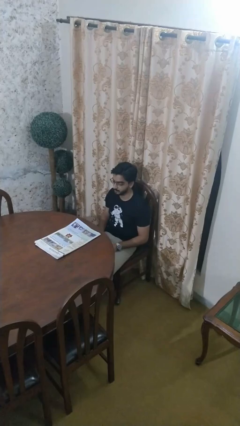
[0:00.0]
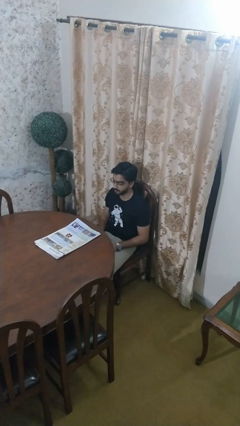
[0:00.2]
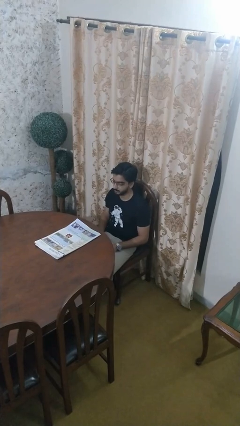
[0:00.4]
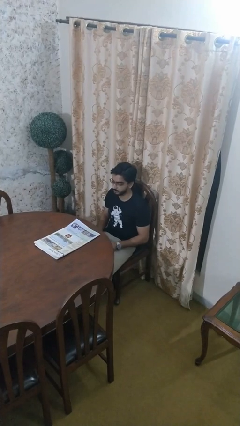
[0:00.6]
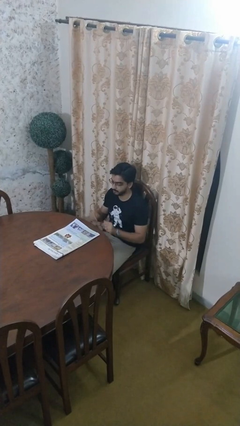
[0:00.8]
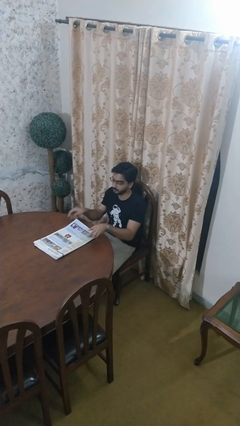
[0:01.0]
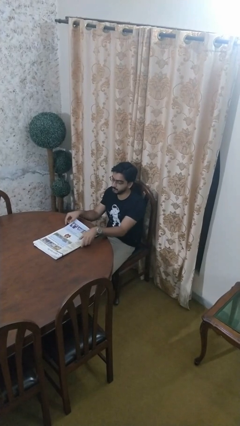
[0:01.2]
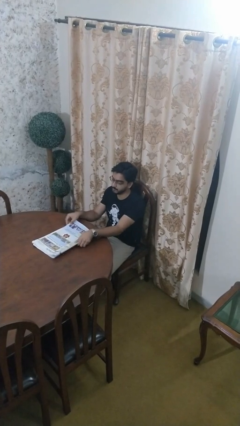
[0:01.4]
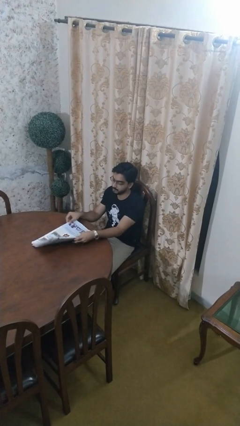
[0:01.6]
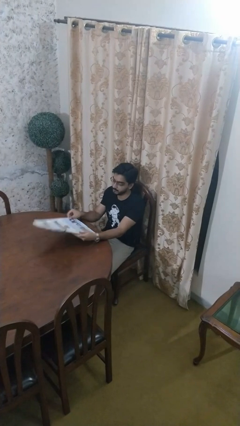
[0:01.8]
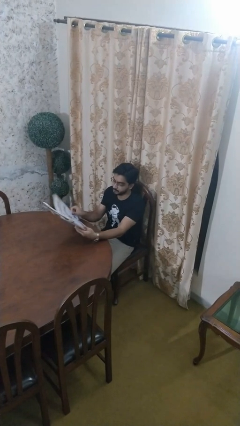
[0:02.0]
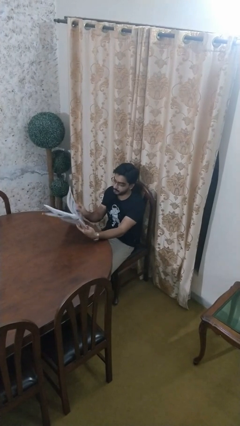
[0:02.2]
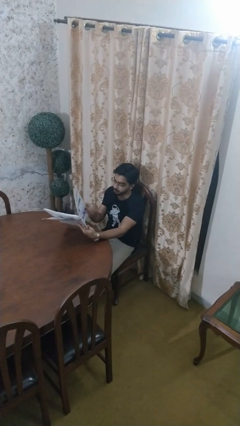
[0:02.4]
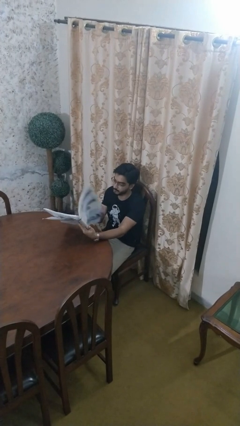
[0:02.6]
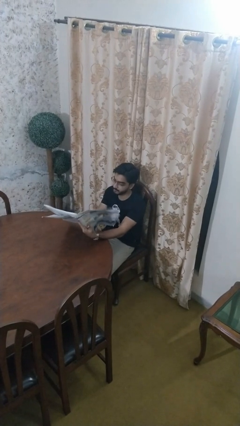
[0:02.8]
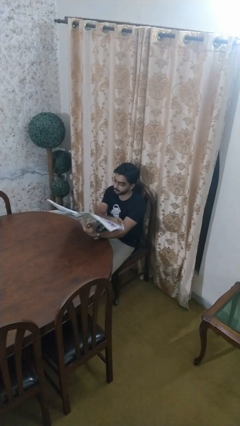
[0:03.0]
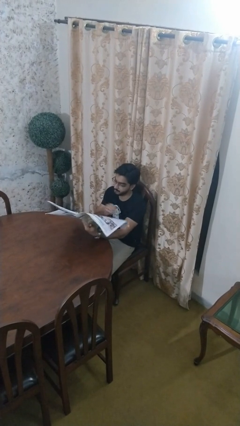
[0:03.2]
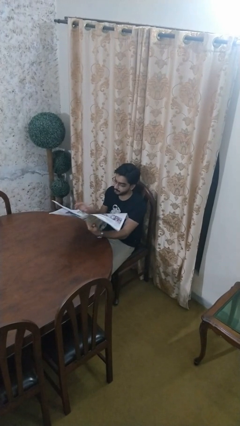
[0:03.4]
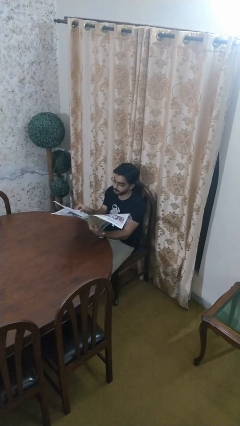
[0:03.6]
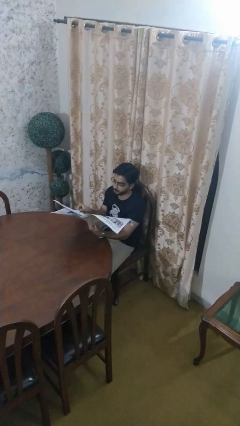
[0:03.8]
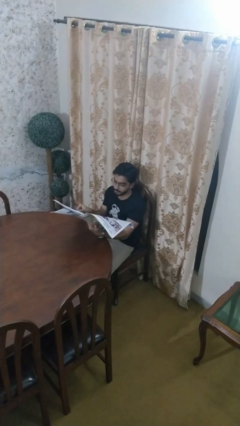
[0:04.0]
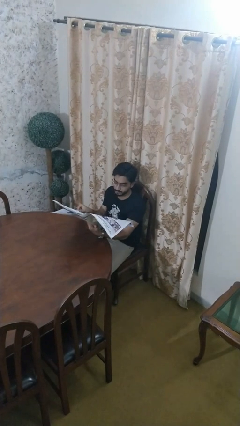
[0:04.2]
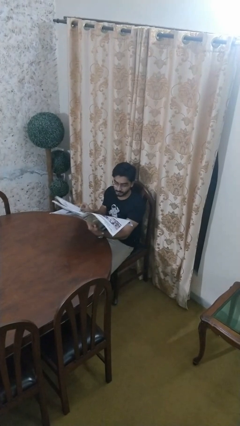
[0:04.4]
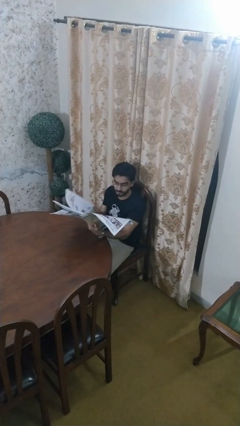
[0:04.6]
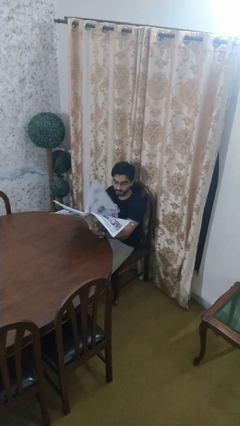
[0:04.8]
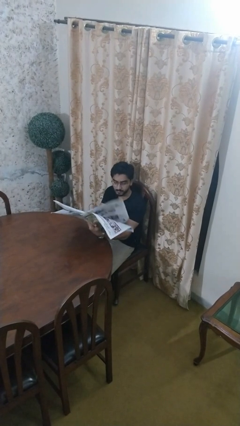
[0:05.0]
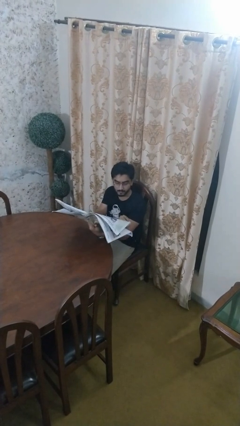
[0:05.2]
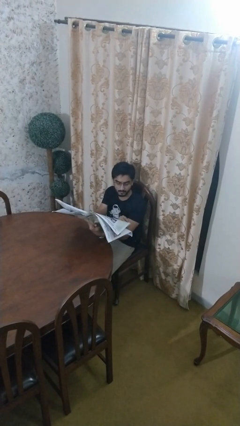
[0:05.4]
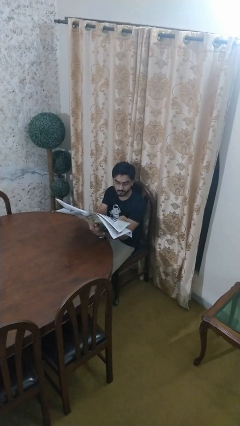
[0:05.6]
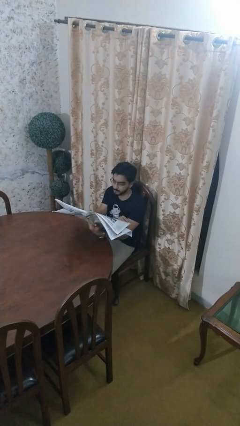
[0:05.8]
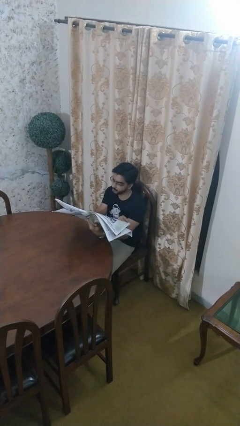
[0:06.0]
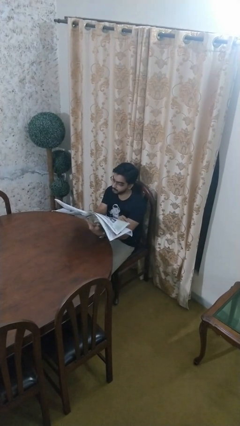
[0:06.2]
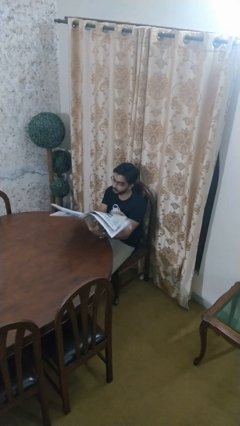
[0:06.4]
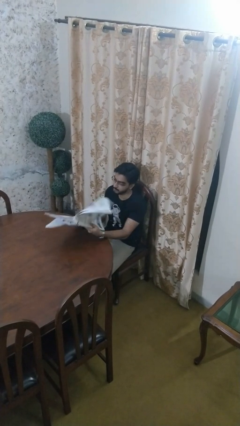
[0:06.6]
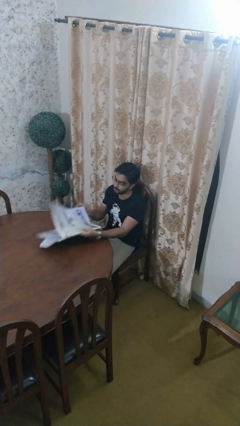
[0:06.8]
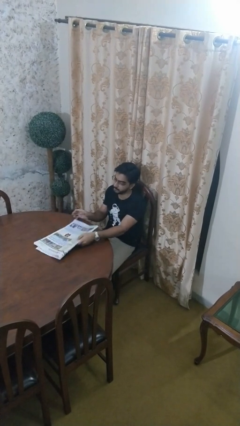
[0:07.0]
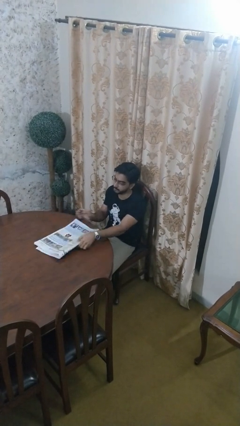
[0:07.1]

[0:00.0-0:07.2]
person reads magazine

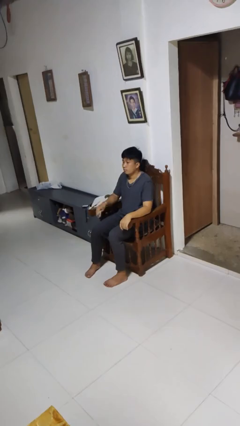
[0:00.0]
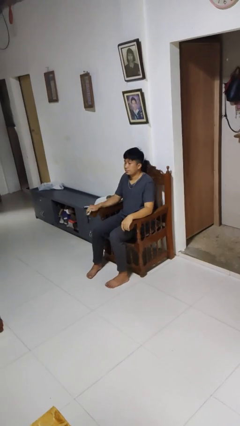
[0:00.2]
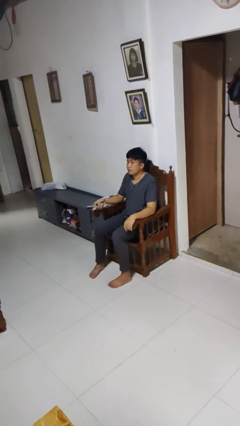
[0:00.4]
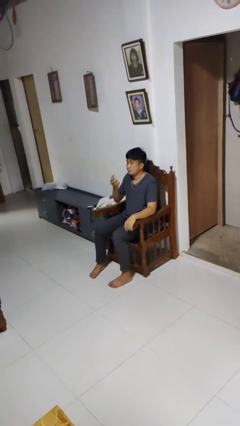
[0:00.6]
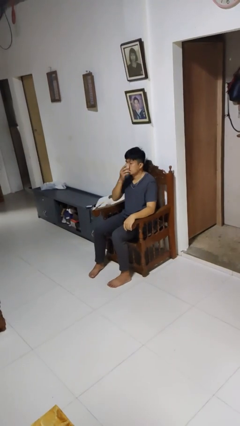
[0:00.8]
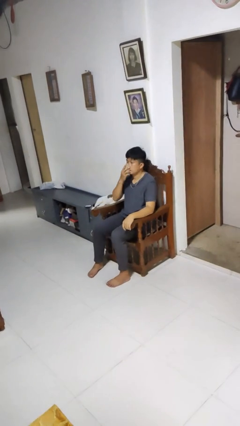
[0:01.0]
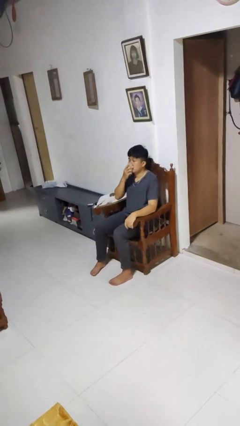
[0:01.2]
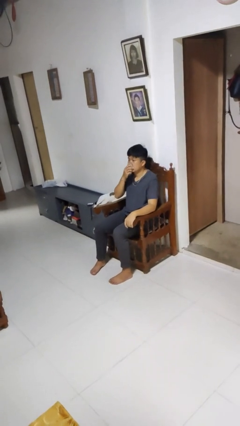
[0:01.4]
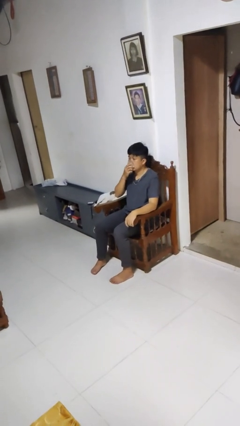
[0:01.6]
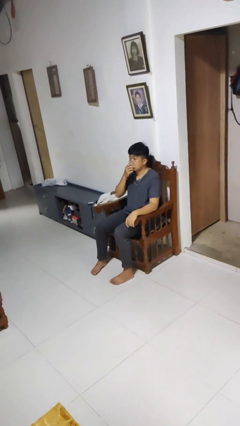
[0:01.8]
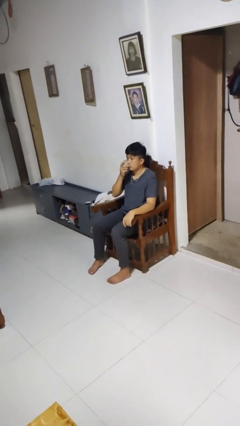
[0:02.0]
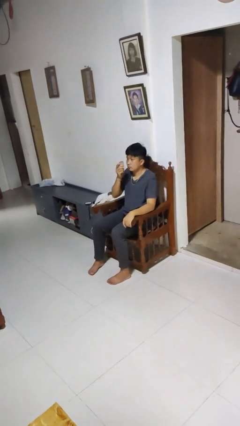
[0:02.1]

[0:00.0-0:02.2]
person blows nose

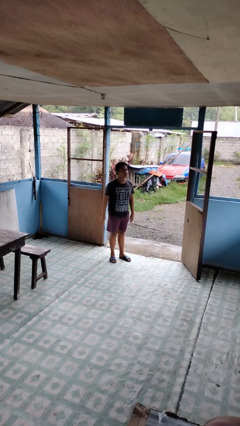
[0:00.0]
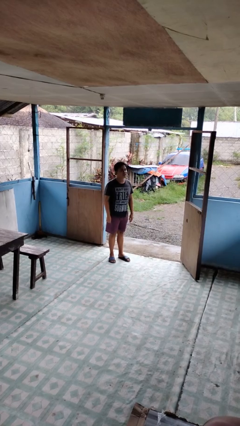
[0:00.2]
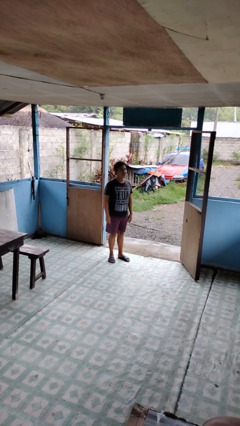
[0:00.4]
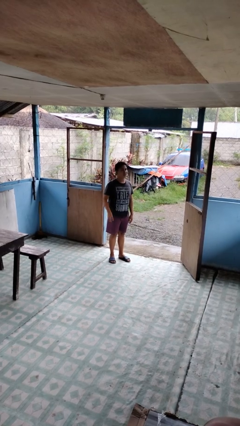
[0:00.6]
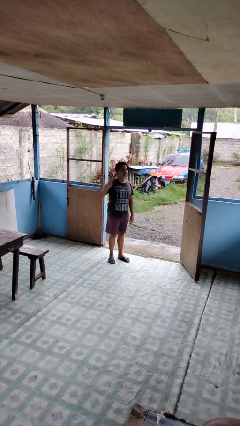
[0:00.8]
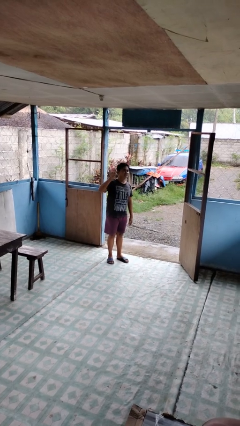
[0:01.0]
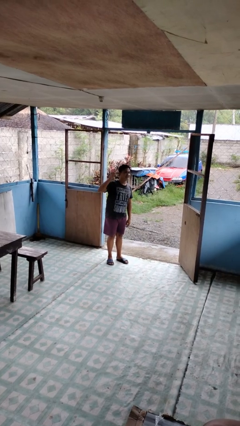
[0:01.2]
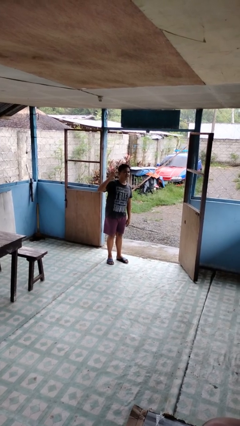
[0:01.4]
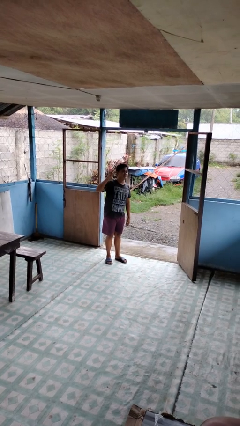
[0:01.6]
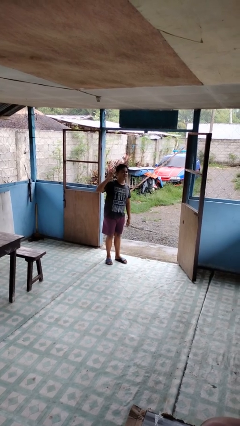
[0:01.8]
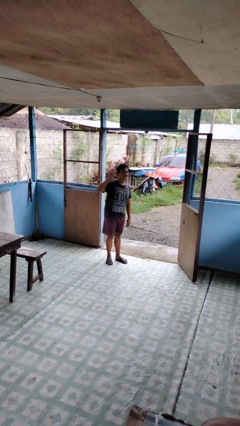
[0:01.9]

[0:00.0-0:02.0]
person gestures peace

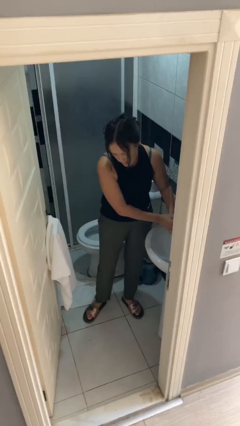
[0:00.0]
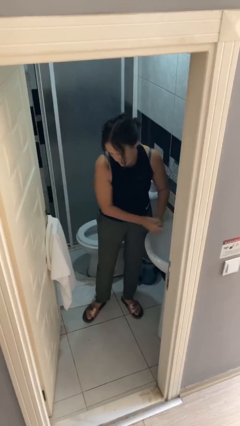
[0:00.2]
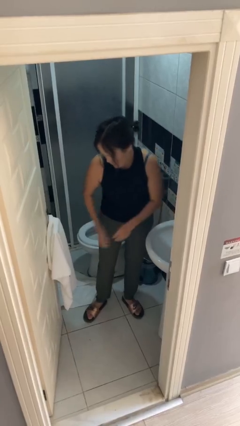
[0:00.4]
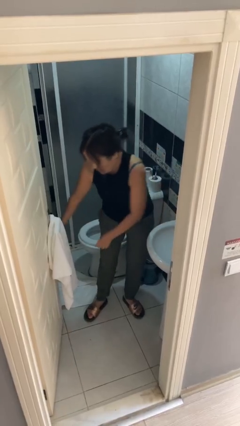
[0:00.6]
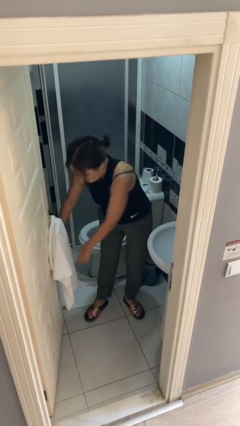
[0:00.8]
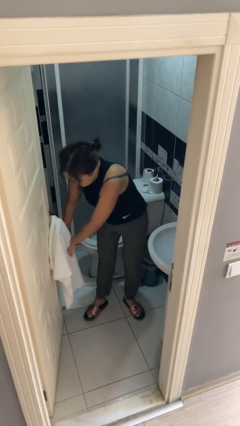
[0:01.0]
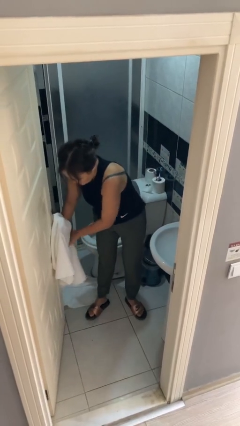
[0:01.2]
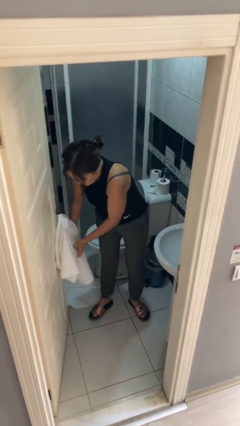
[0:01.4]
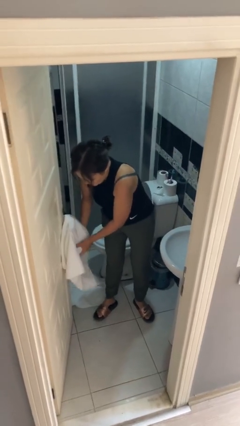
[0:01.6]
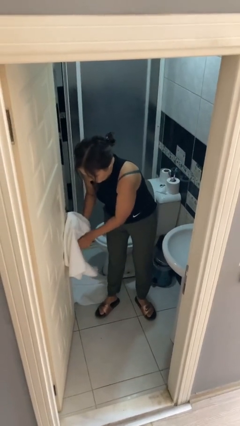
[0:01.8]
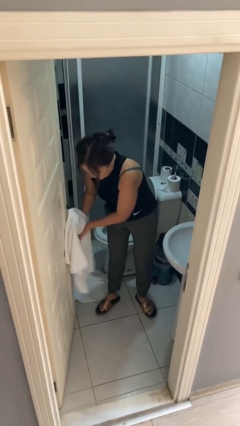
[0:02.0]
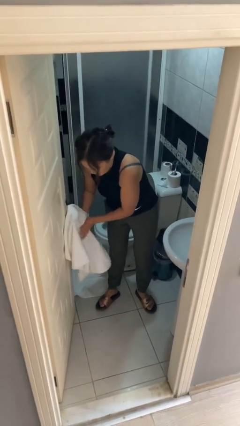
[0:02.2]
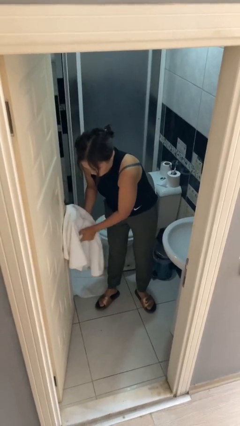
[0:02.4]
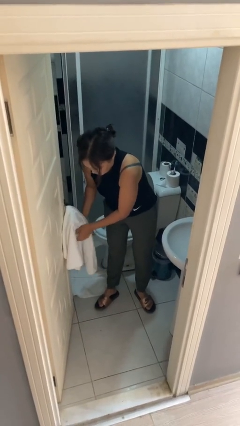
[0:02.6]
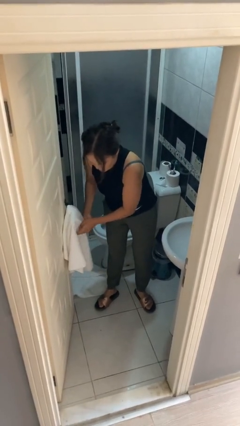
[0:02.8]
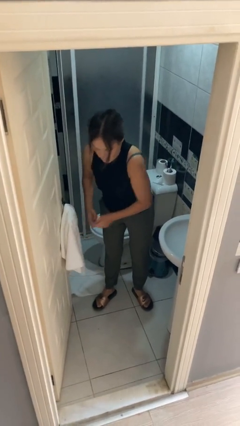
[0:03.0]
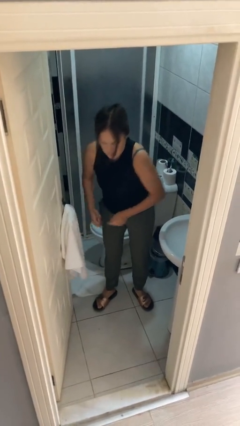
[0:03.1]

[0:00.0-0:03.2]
person dries hands with towel

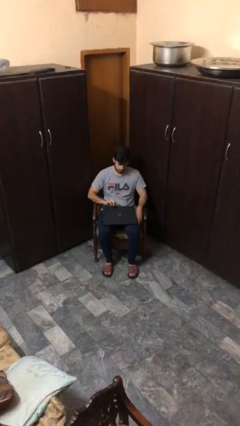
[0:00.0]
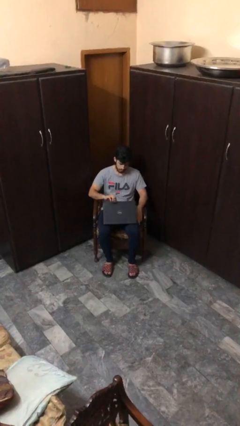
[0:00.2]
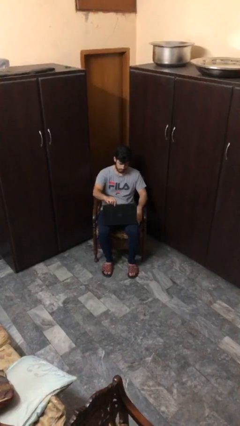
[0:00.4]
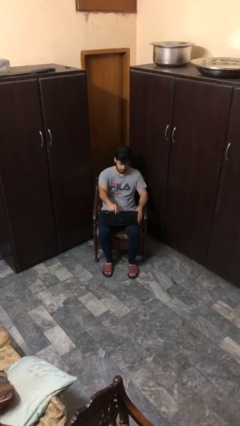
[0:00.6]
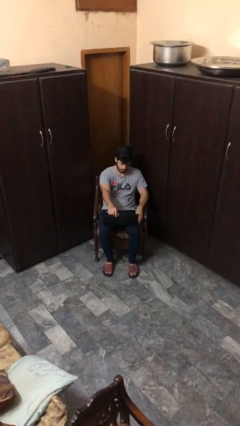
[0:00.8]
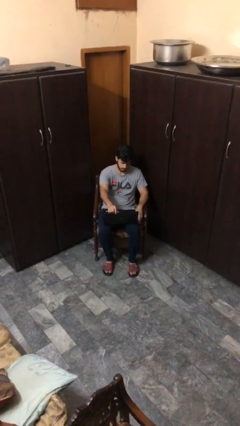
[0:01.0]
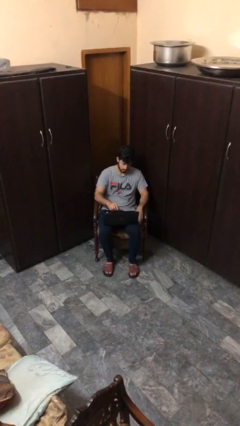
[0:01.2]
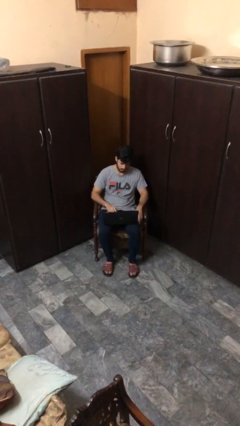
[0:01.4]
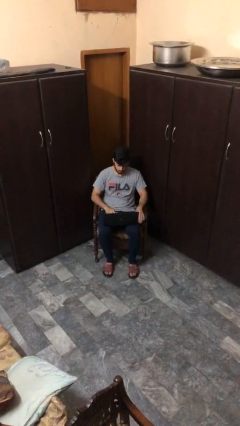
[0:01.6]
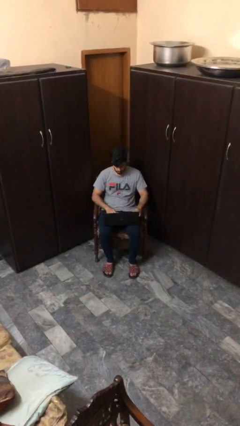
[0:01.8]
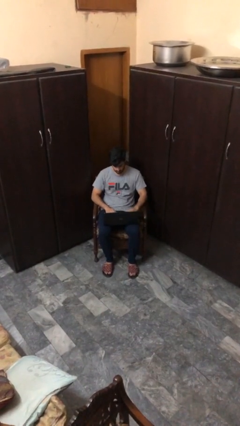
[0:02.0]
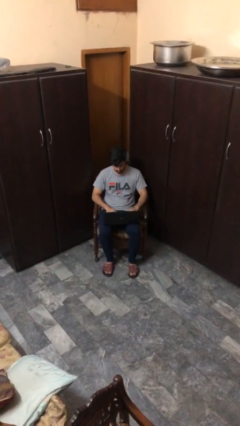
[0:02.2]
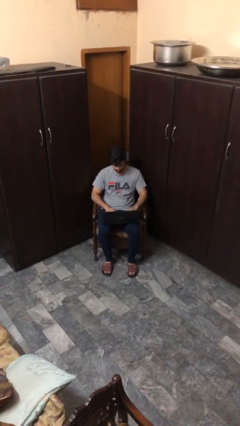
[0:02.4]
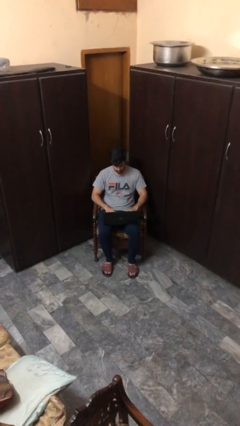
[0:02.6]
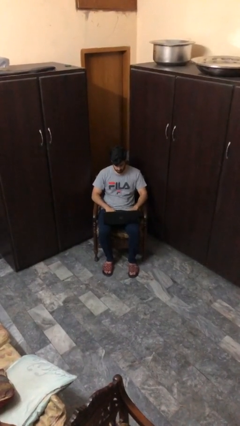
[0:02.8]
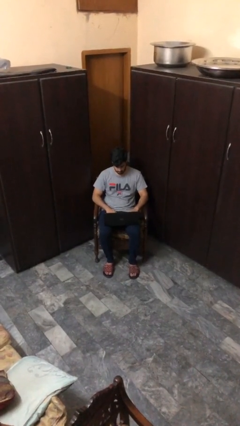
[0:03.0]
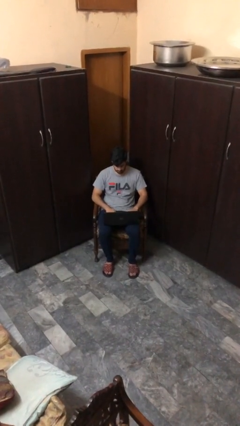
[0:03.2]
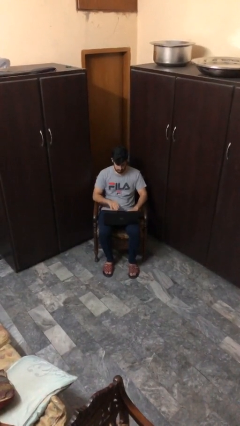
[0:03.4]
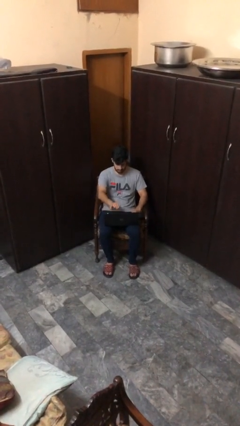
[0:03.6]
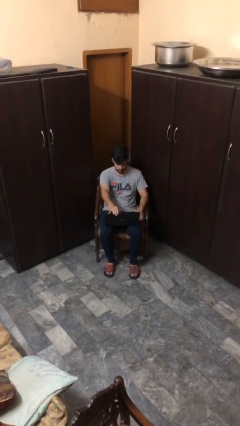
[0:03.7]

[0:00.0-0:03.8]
person opens laptop
